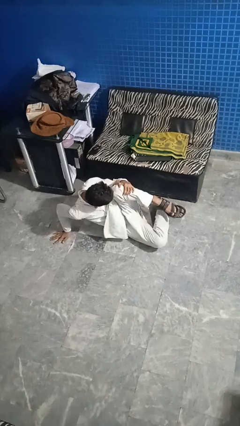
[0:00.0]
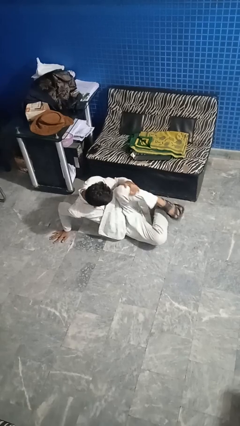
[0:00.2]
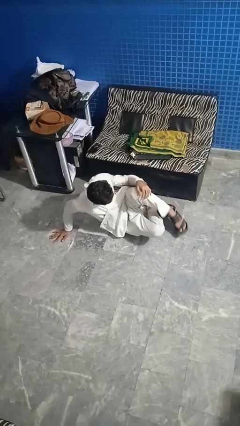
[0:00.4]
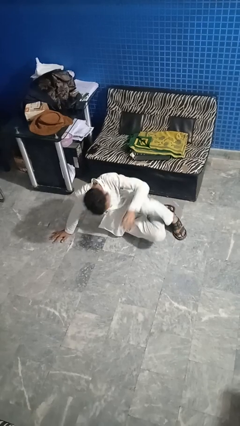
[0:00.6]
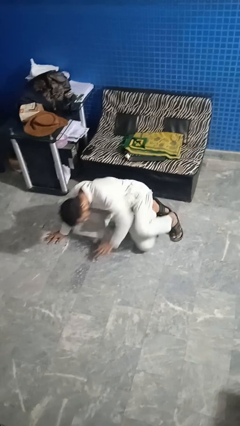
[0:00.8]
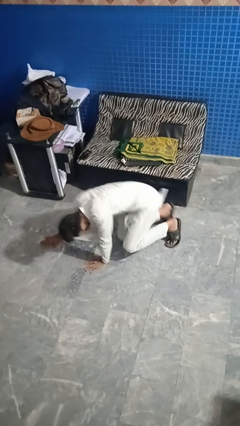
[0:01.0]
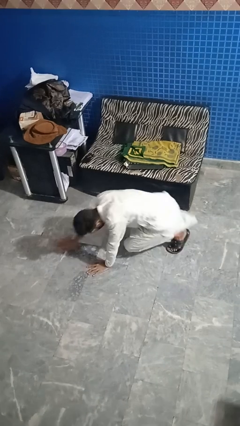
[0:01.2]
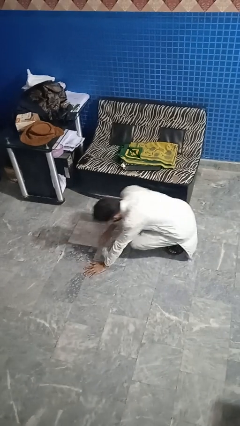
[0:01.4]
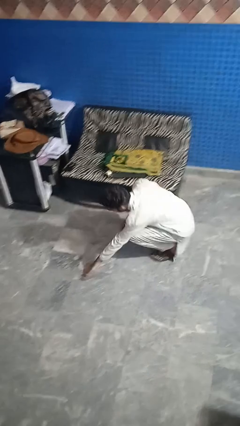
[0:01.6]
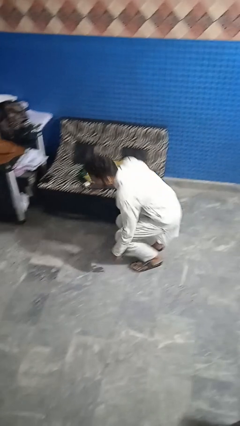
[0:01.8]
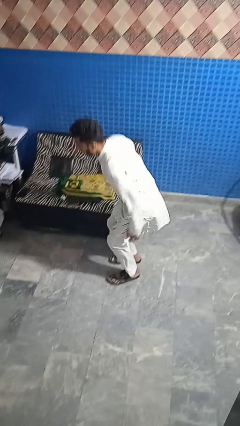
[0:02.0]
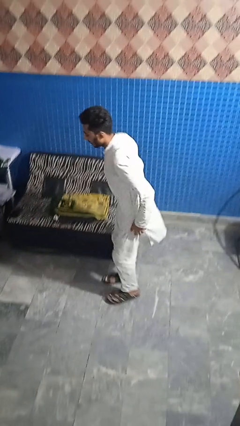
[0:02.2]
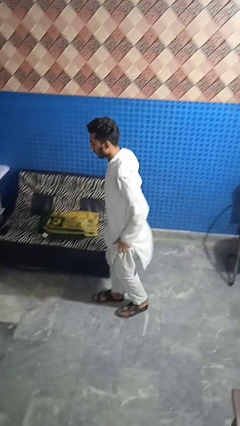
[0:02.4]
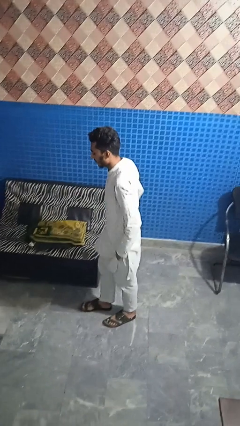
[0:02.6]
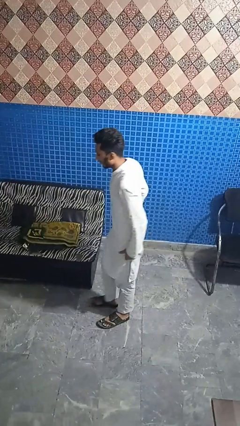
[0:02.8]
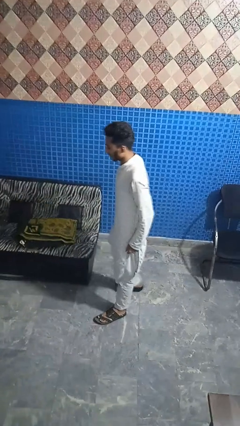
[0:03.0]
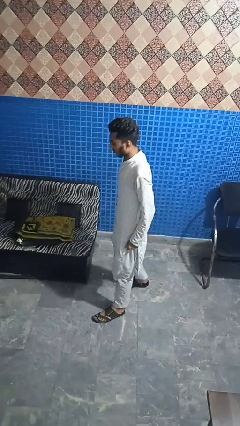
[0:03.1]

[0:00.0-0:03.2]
person stands up from floor

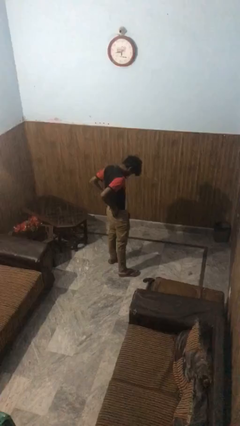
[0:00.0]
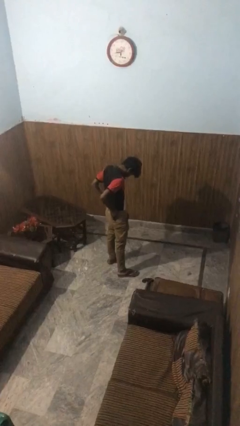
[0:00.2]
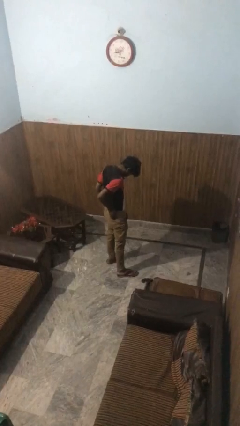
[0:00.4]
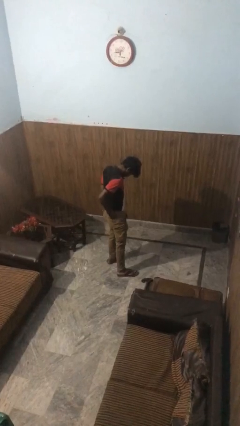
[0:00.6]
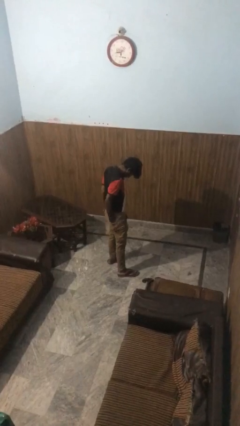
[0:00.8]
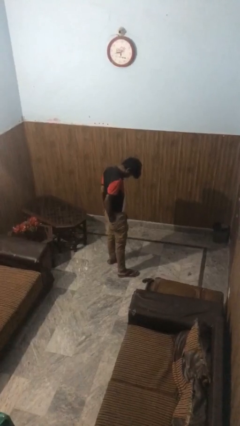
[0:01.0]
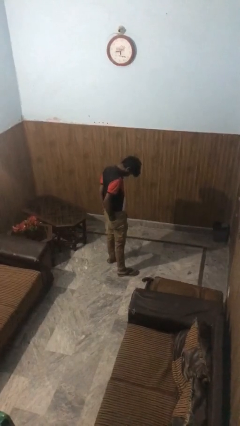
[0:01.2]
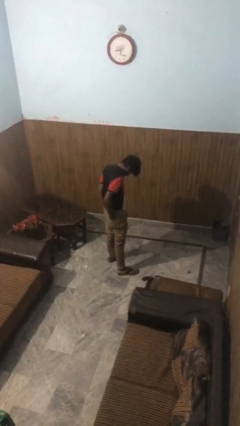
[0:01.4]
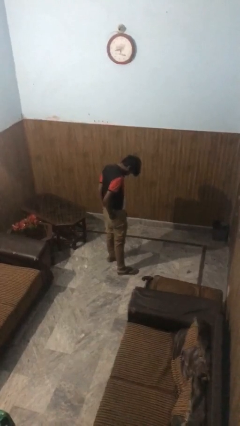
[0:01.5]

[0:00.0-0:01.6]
person puts hands in back pockets

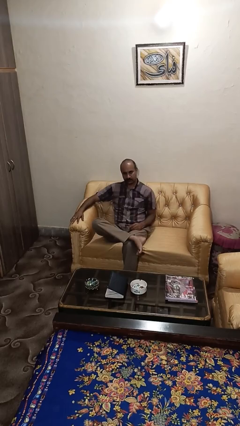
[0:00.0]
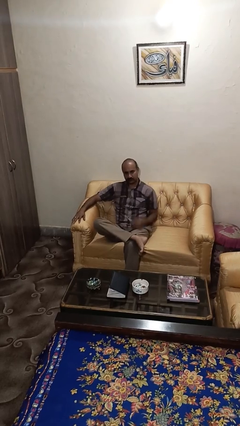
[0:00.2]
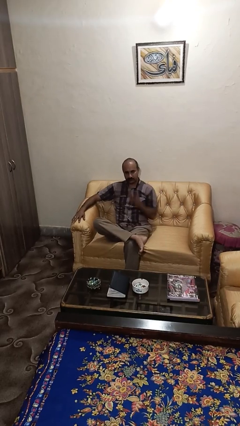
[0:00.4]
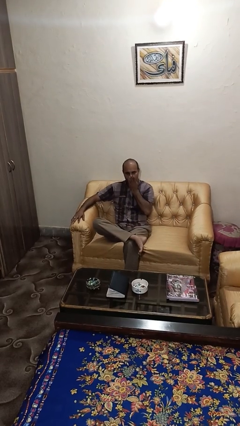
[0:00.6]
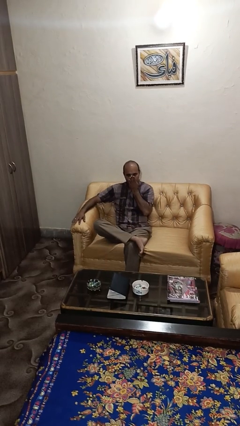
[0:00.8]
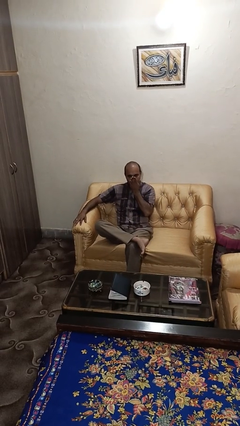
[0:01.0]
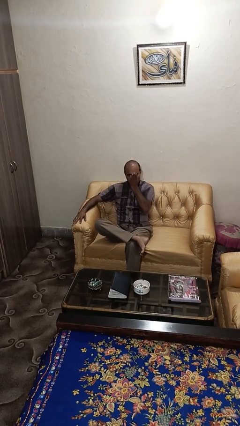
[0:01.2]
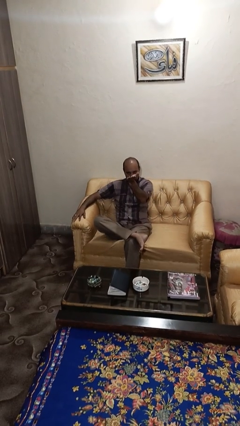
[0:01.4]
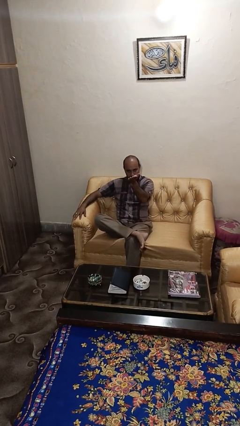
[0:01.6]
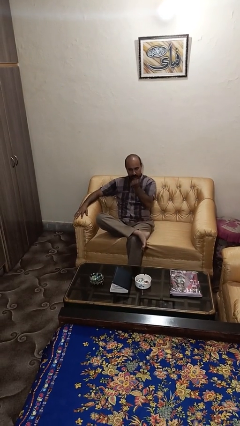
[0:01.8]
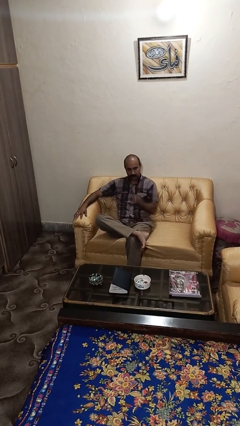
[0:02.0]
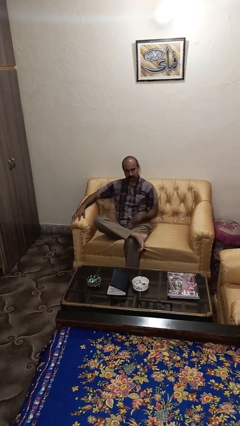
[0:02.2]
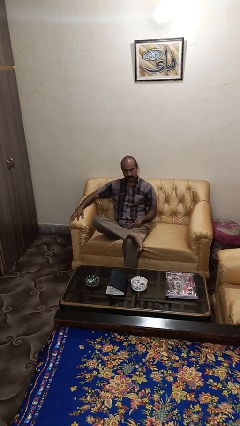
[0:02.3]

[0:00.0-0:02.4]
person gestures blow kiss

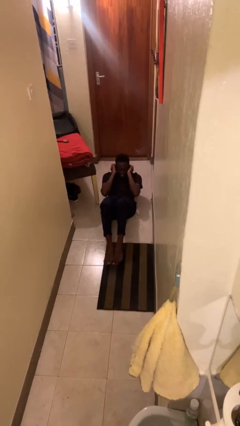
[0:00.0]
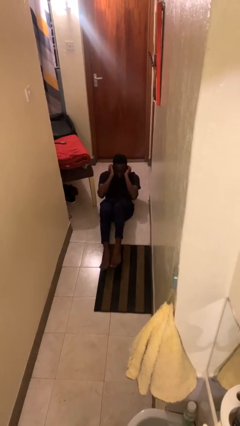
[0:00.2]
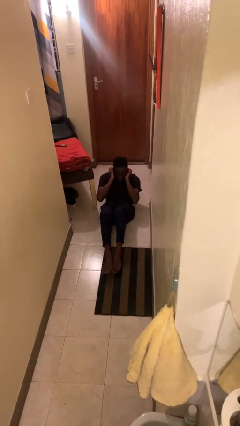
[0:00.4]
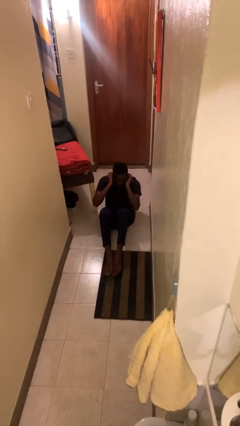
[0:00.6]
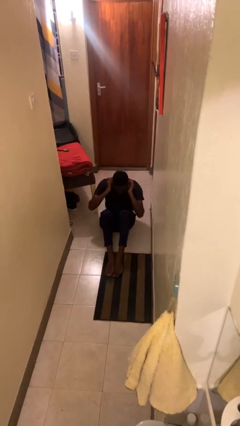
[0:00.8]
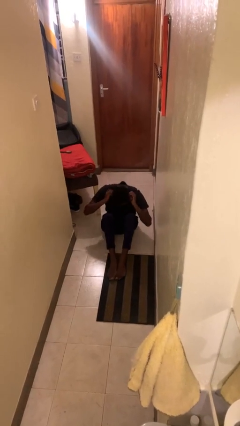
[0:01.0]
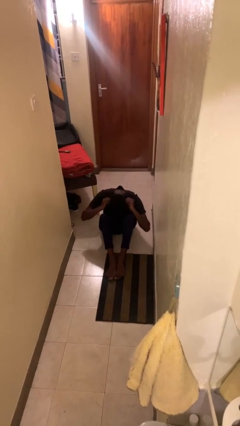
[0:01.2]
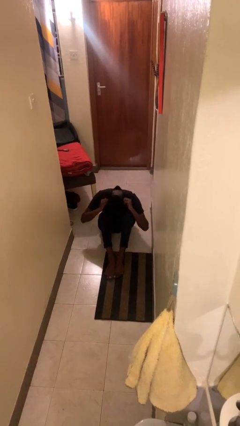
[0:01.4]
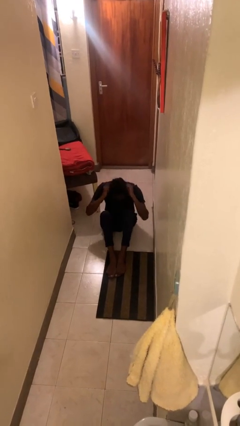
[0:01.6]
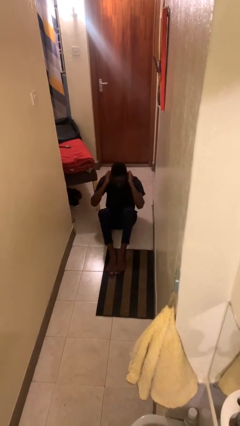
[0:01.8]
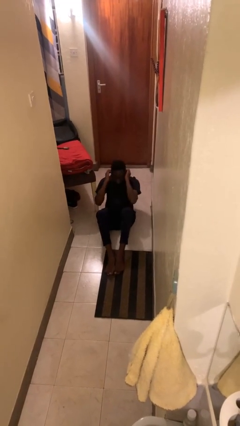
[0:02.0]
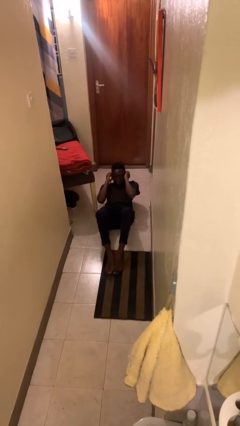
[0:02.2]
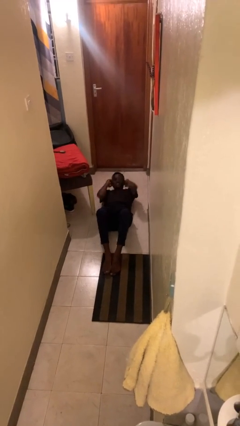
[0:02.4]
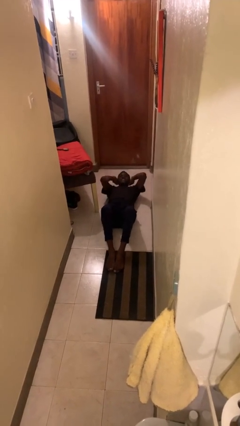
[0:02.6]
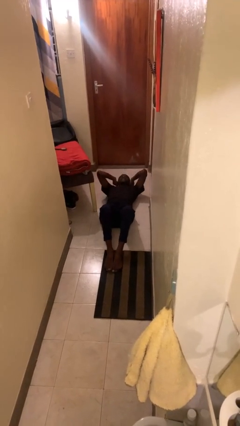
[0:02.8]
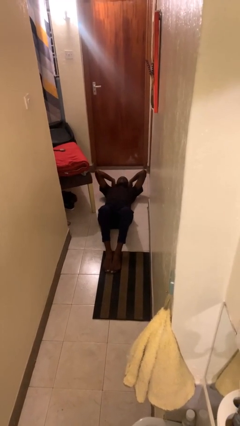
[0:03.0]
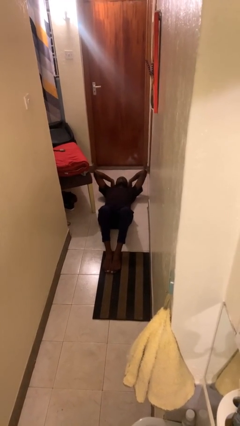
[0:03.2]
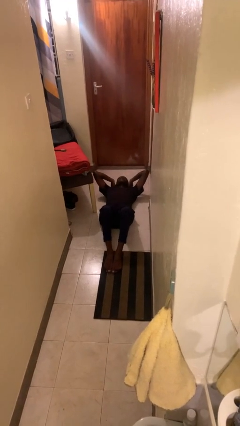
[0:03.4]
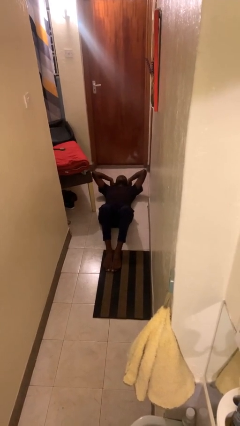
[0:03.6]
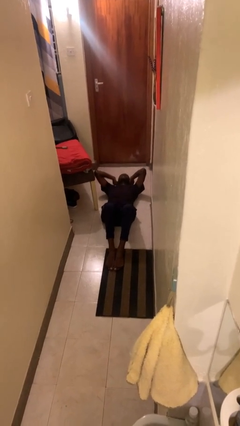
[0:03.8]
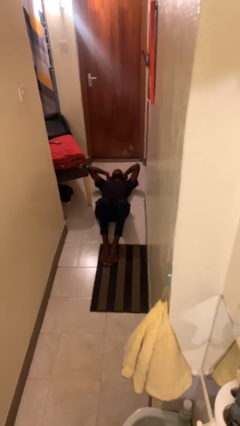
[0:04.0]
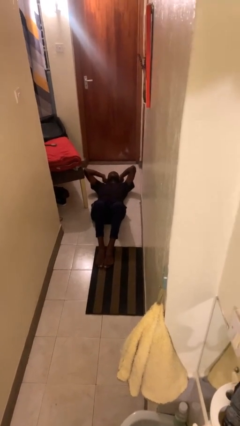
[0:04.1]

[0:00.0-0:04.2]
person exercises with situp

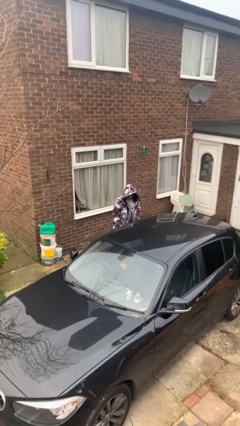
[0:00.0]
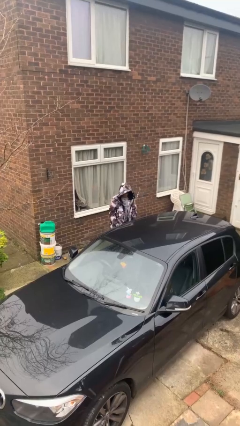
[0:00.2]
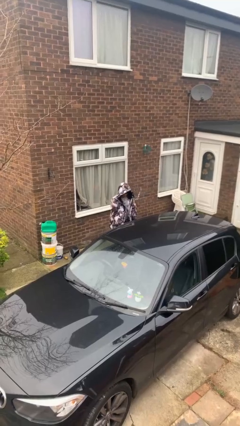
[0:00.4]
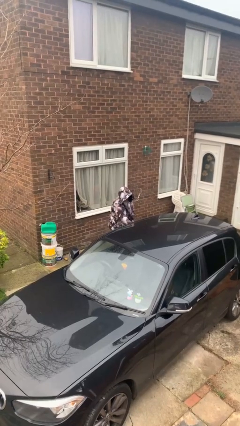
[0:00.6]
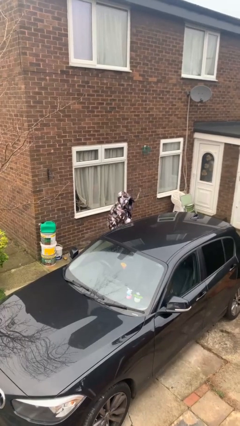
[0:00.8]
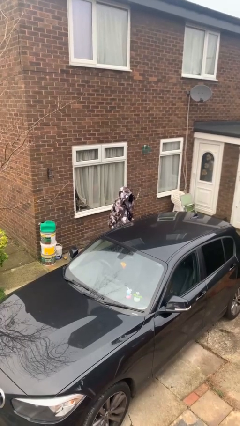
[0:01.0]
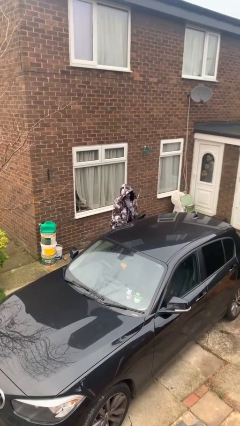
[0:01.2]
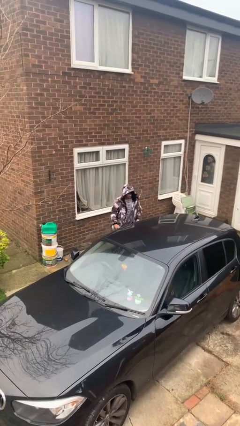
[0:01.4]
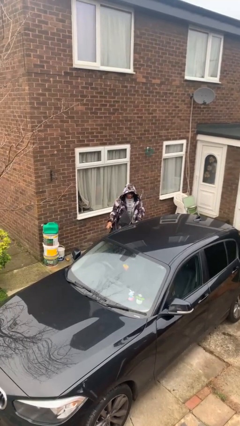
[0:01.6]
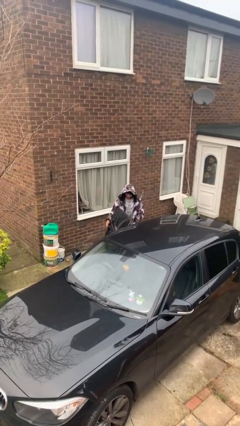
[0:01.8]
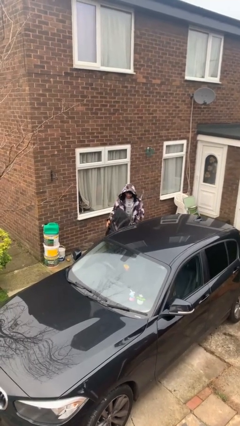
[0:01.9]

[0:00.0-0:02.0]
person opens car door

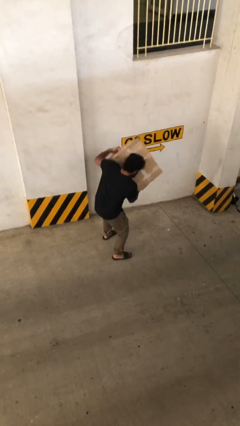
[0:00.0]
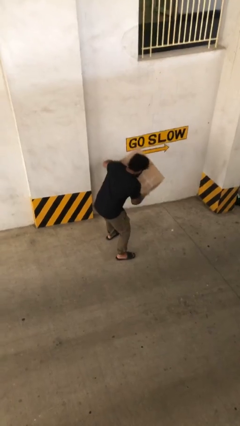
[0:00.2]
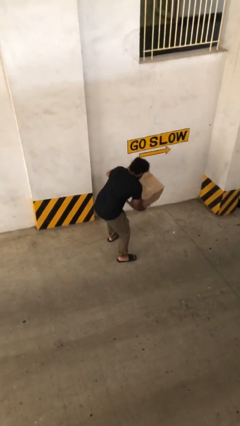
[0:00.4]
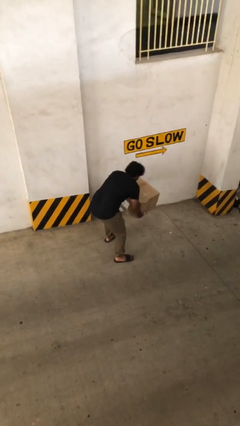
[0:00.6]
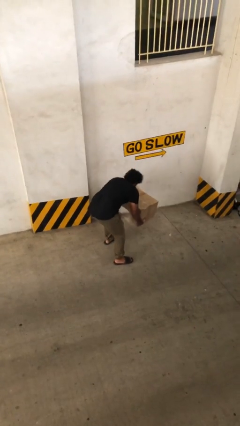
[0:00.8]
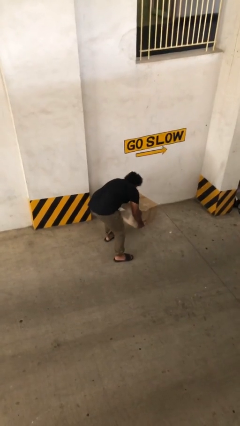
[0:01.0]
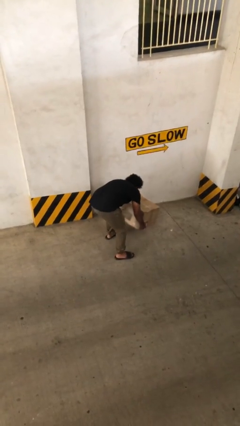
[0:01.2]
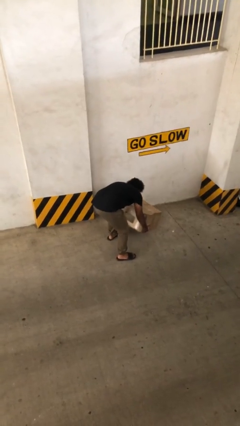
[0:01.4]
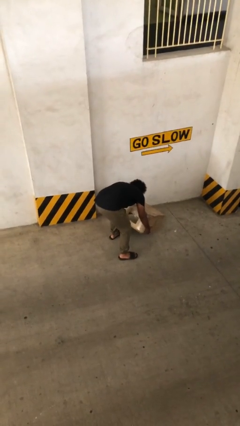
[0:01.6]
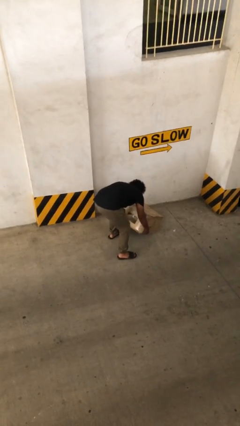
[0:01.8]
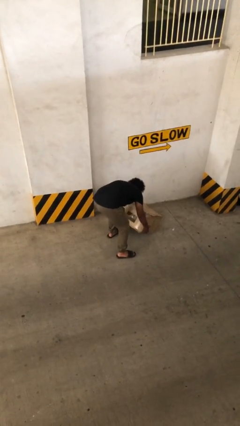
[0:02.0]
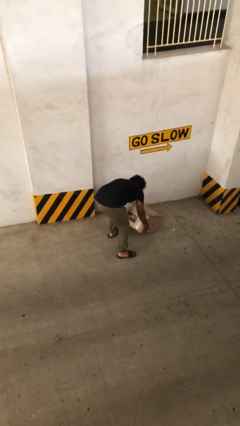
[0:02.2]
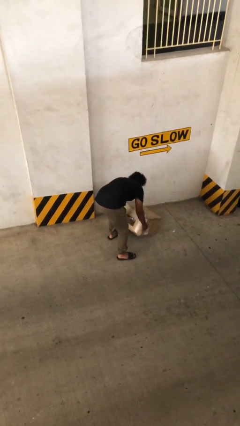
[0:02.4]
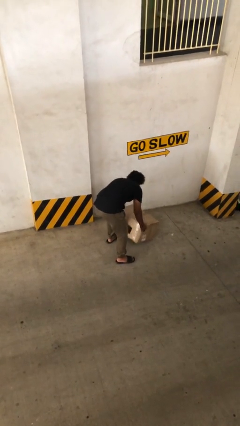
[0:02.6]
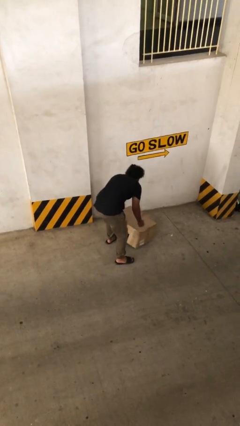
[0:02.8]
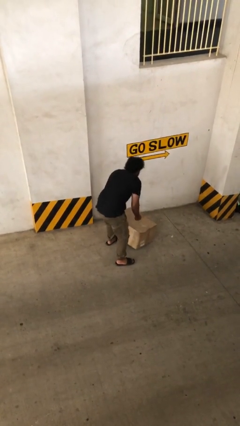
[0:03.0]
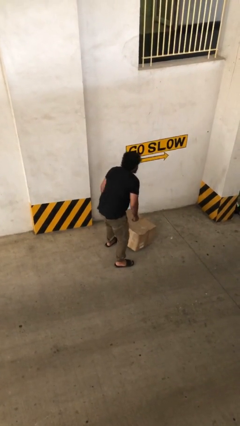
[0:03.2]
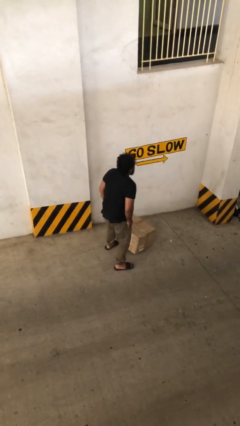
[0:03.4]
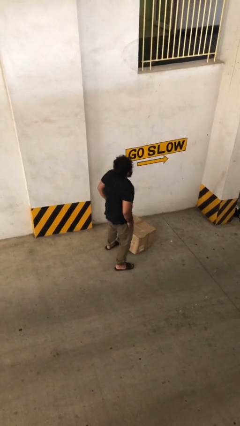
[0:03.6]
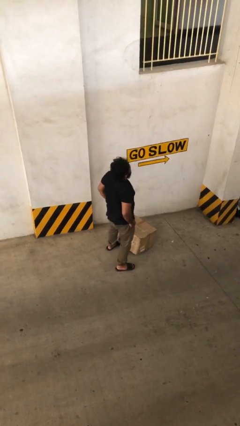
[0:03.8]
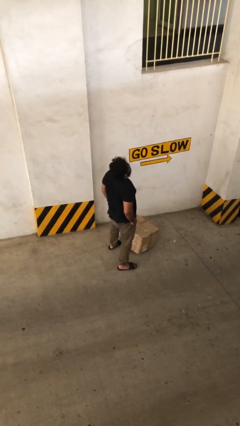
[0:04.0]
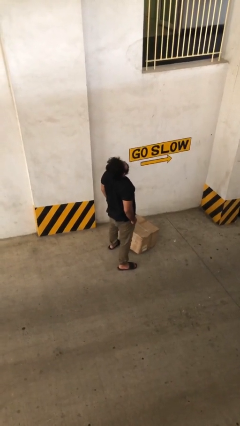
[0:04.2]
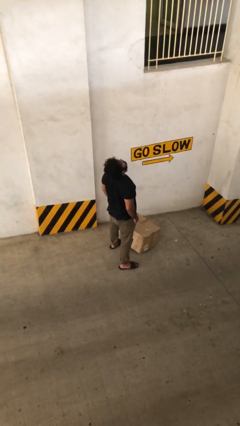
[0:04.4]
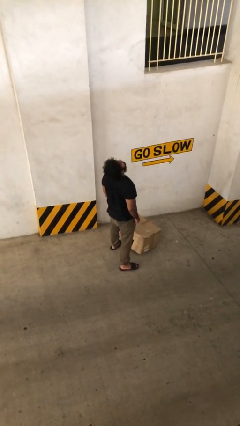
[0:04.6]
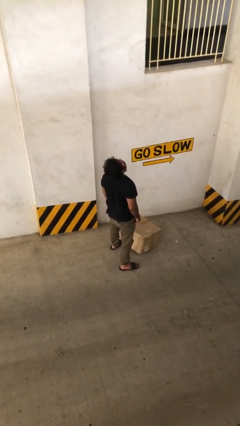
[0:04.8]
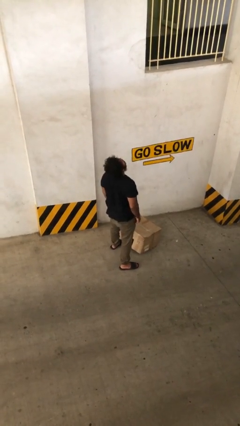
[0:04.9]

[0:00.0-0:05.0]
person puts down object on floor
